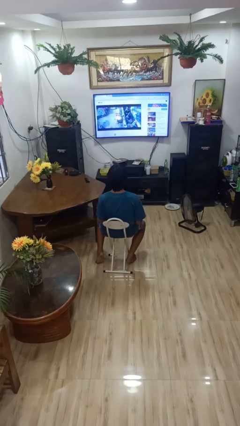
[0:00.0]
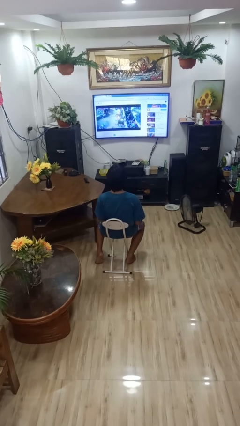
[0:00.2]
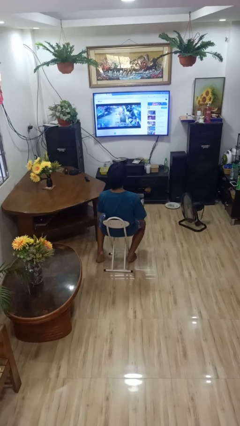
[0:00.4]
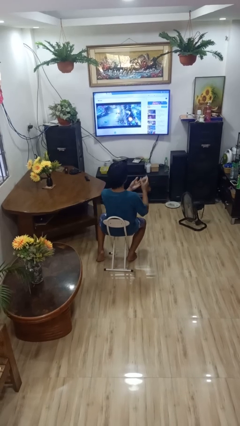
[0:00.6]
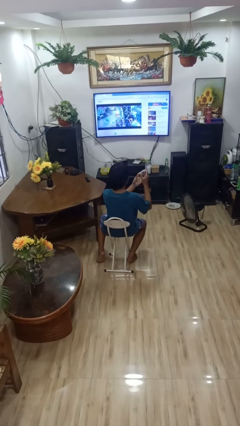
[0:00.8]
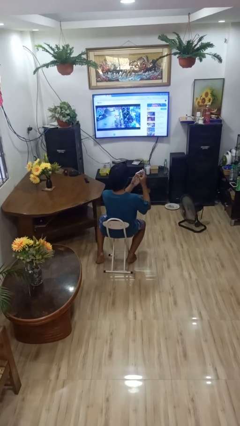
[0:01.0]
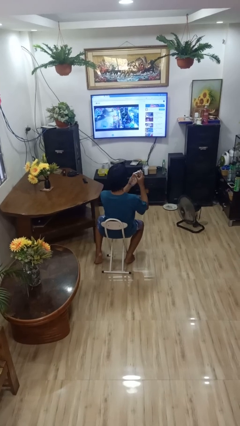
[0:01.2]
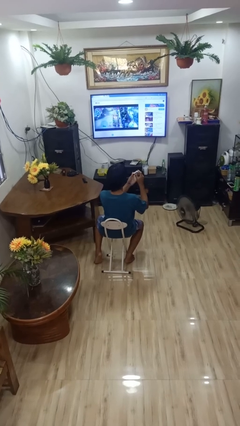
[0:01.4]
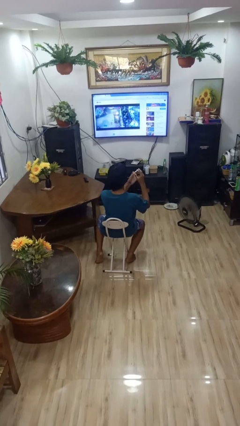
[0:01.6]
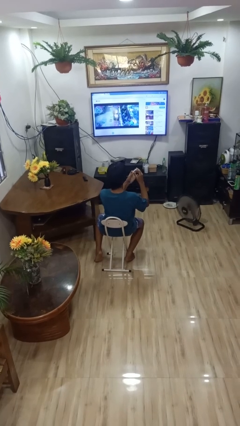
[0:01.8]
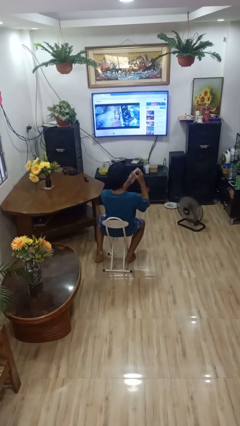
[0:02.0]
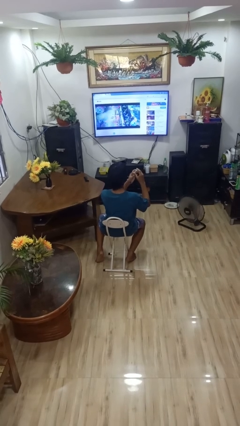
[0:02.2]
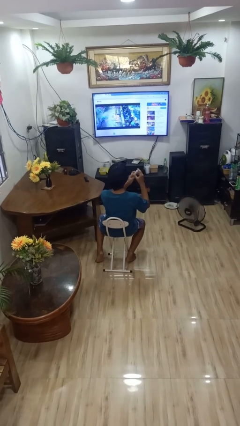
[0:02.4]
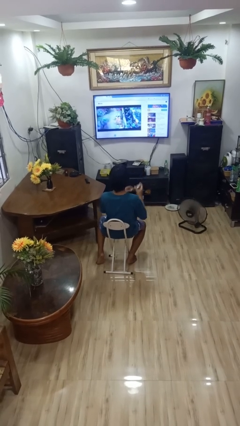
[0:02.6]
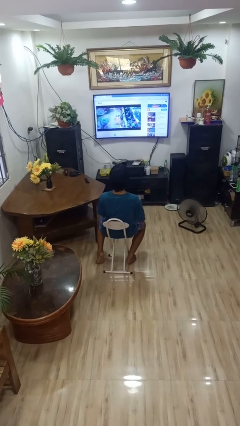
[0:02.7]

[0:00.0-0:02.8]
person clips fingernails

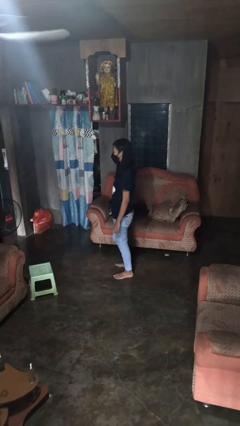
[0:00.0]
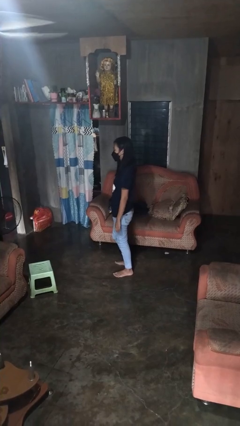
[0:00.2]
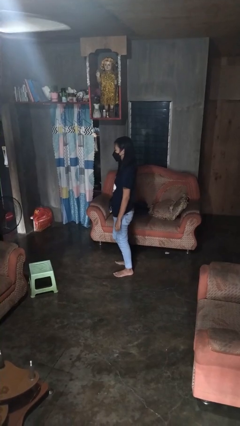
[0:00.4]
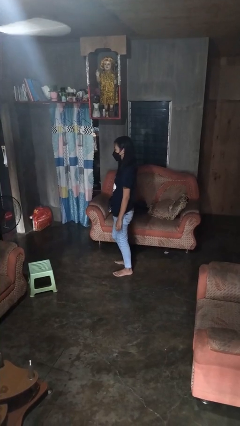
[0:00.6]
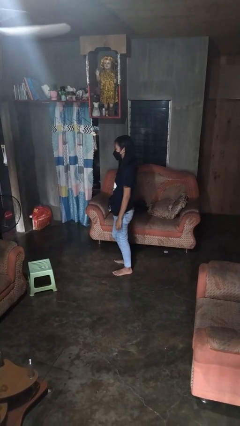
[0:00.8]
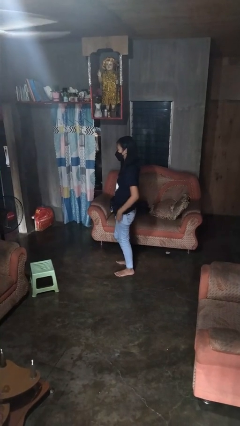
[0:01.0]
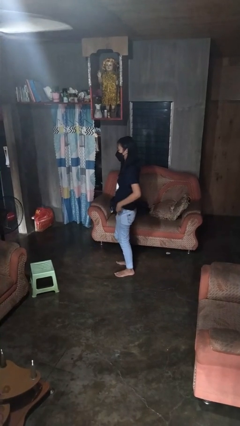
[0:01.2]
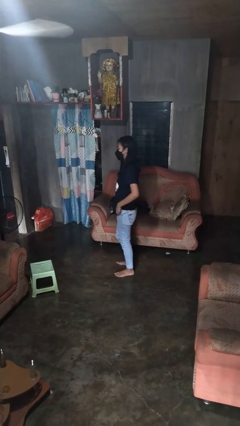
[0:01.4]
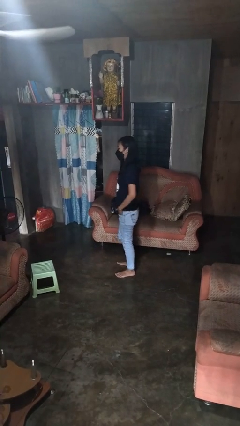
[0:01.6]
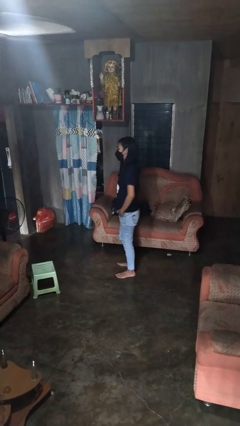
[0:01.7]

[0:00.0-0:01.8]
person puts hands in back pockets

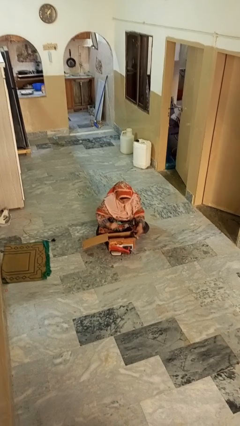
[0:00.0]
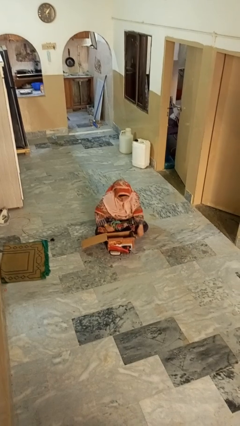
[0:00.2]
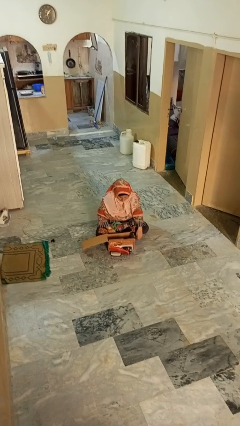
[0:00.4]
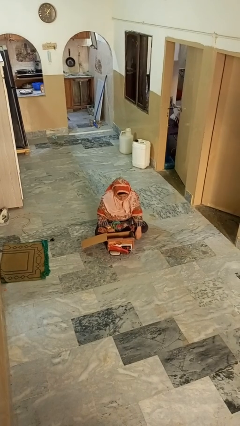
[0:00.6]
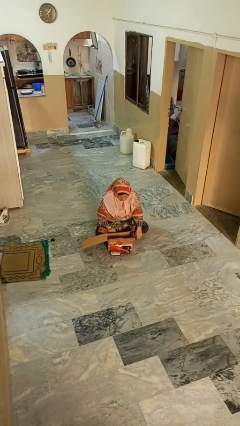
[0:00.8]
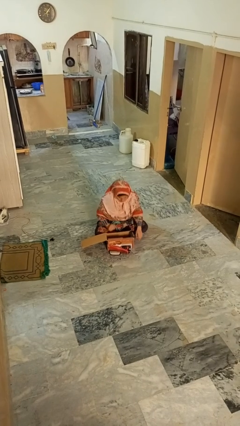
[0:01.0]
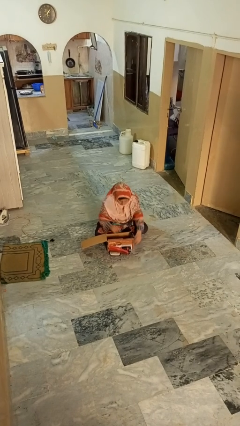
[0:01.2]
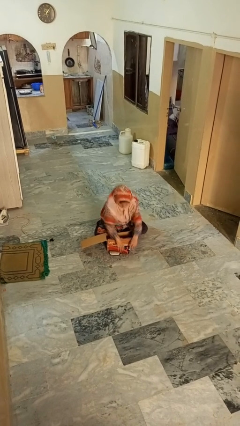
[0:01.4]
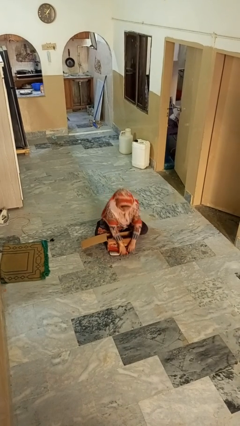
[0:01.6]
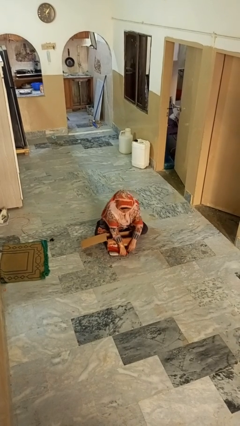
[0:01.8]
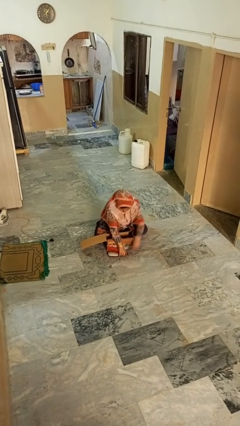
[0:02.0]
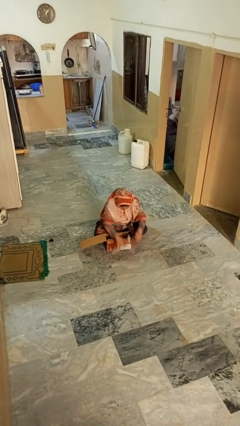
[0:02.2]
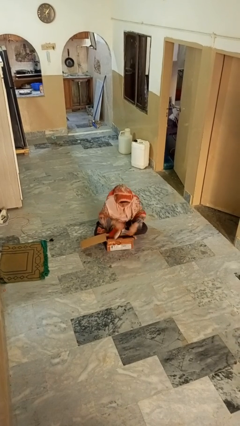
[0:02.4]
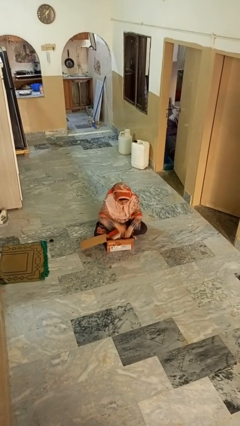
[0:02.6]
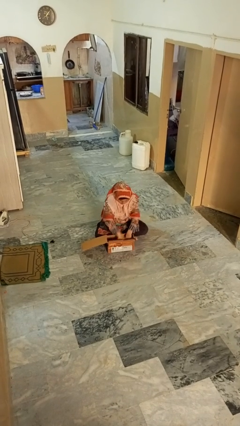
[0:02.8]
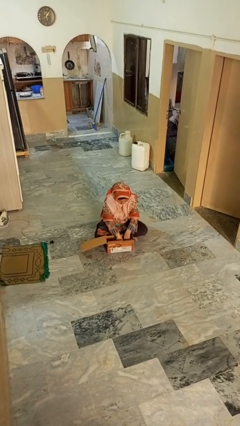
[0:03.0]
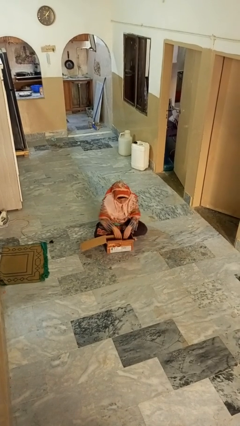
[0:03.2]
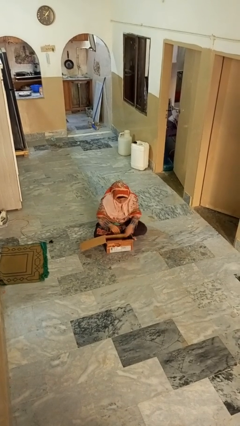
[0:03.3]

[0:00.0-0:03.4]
person puts object into box

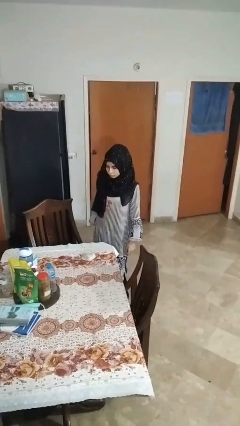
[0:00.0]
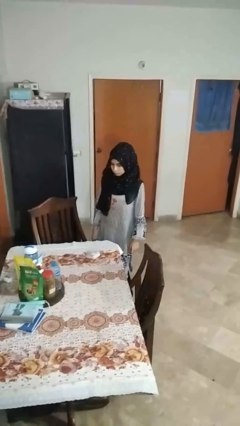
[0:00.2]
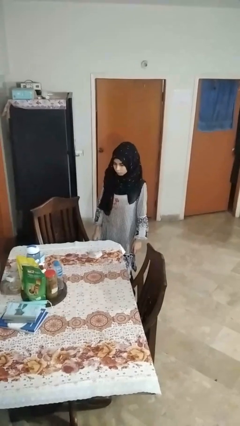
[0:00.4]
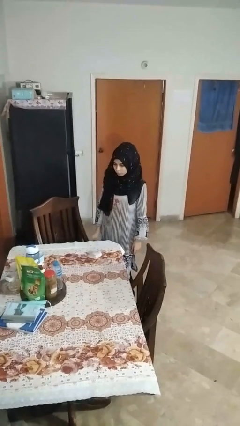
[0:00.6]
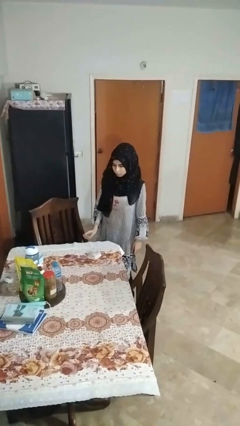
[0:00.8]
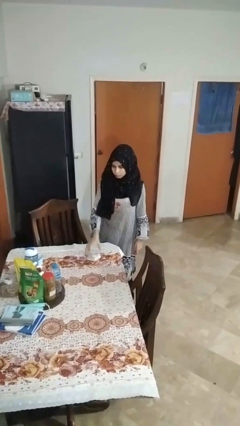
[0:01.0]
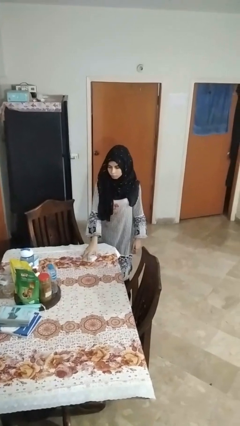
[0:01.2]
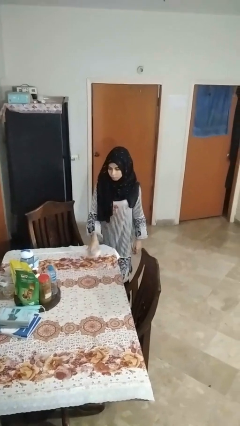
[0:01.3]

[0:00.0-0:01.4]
person picks up object from table

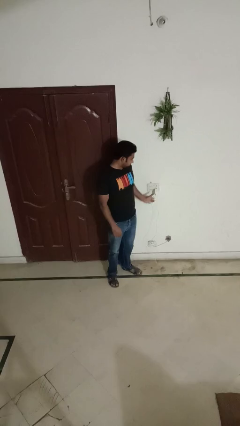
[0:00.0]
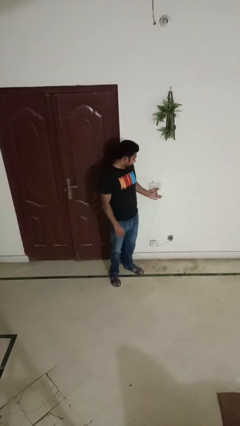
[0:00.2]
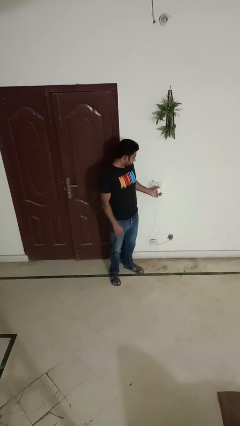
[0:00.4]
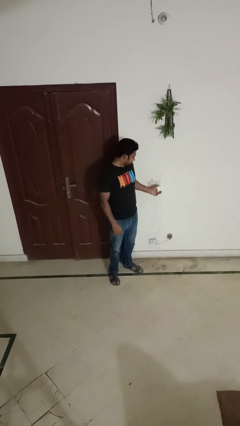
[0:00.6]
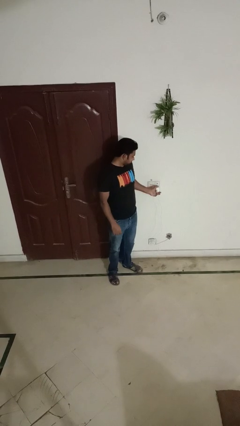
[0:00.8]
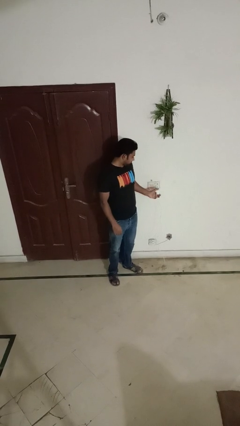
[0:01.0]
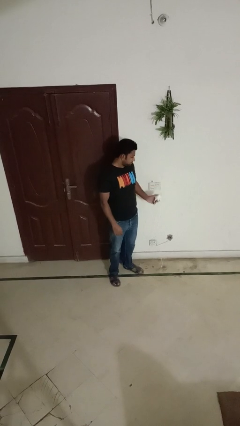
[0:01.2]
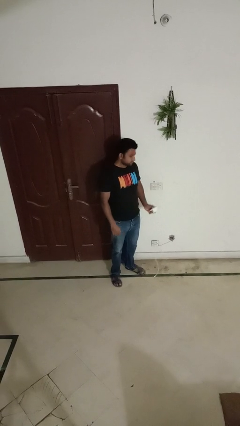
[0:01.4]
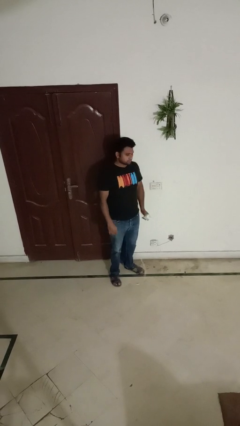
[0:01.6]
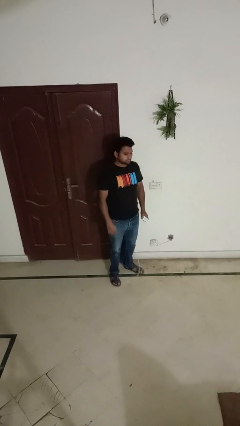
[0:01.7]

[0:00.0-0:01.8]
person unplugs from electrical socket

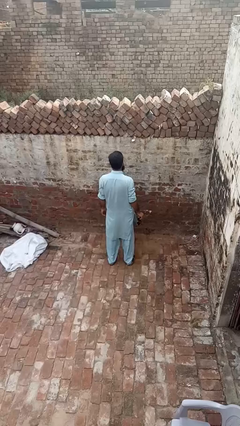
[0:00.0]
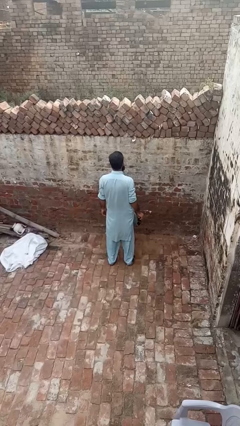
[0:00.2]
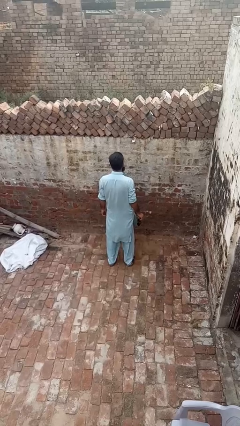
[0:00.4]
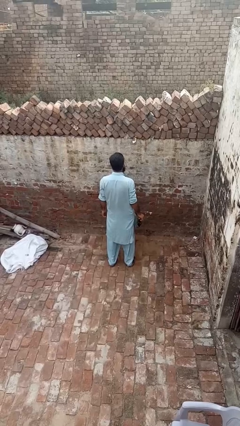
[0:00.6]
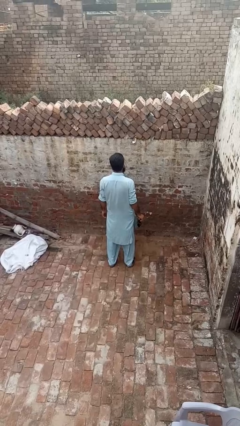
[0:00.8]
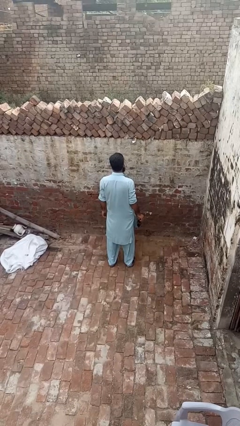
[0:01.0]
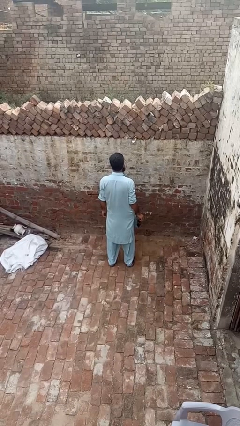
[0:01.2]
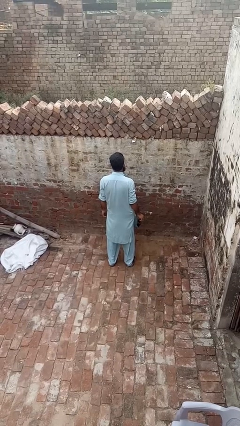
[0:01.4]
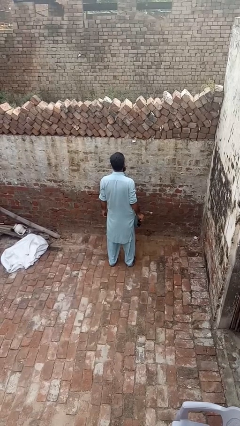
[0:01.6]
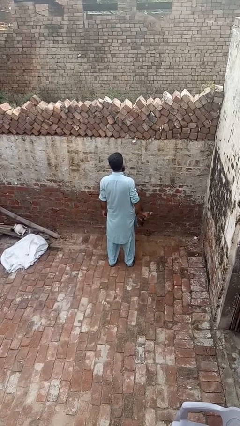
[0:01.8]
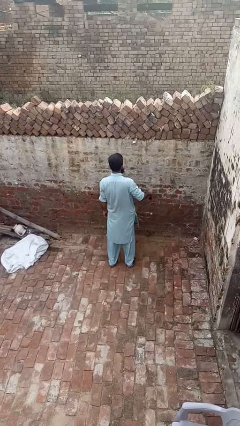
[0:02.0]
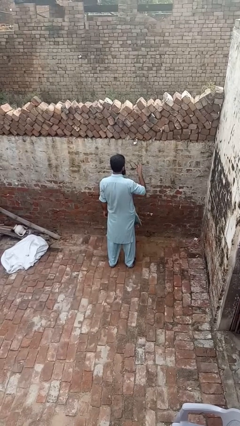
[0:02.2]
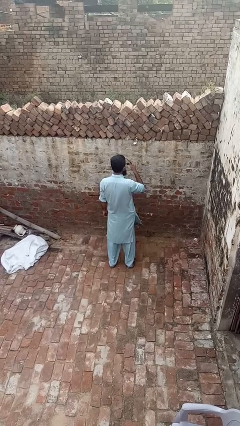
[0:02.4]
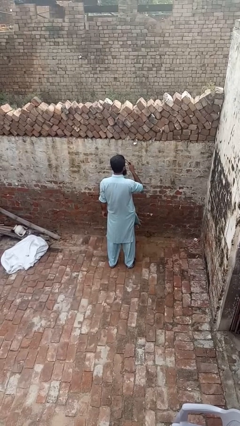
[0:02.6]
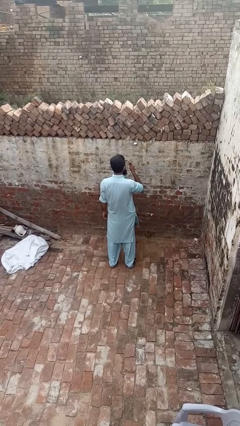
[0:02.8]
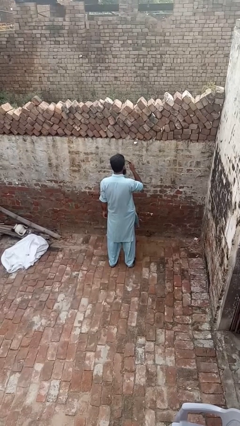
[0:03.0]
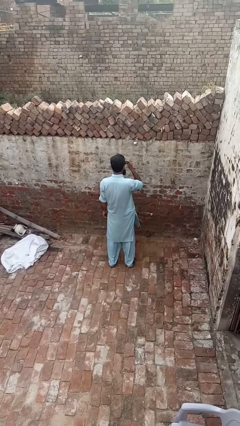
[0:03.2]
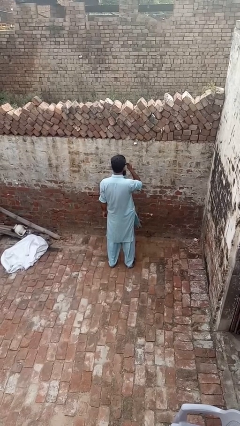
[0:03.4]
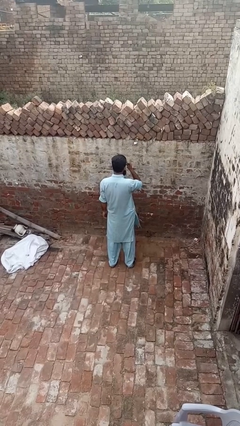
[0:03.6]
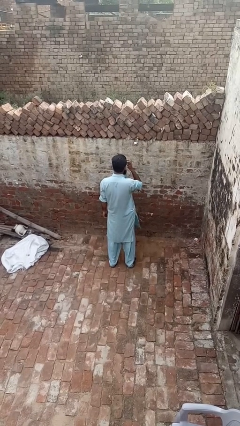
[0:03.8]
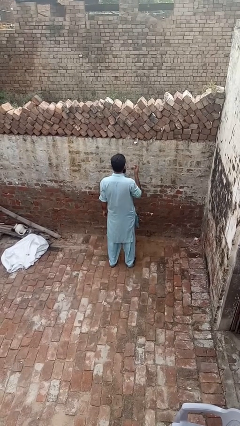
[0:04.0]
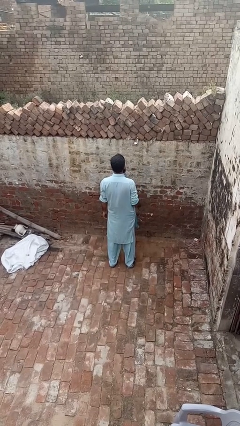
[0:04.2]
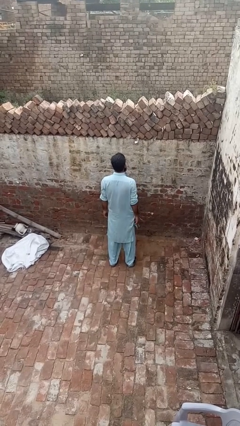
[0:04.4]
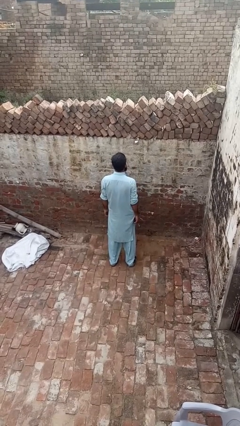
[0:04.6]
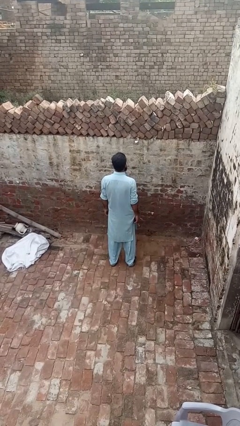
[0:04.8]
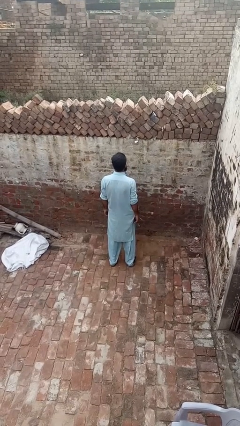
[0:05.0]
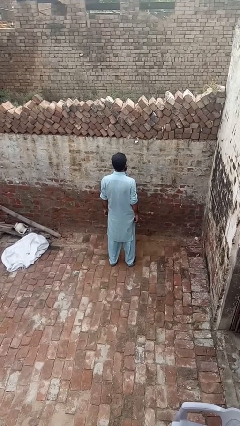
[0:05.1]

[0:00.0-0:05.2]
person puts on sunglasses

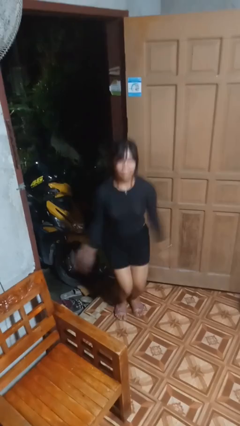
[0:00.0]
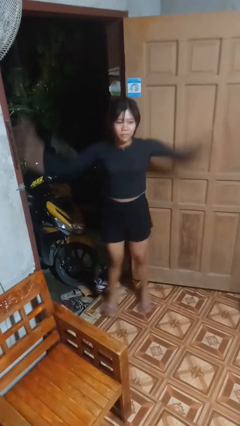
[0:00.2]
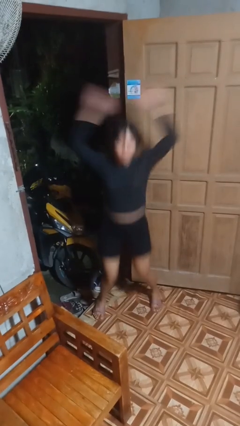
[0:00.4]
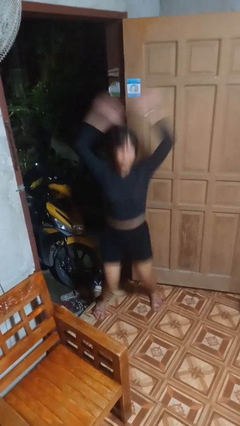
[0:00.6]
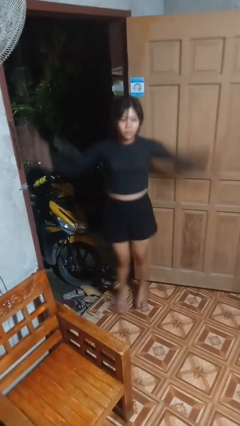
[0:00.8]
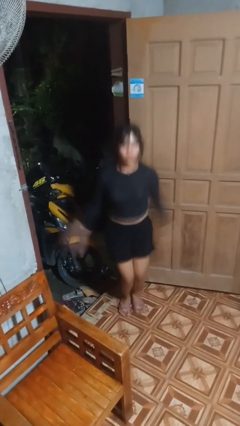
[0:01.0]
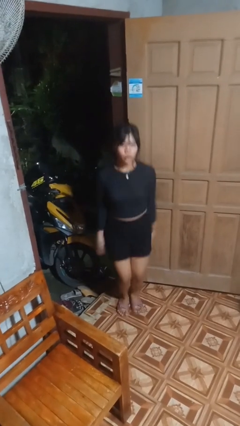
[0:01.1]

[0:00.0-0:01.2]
person exercises with jumping jacks
